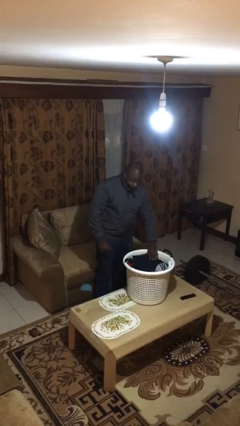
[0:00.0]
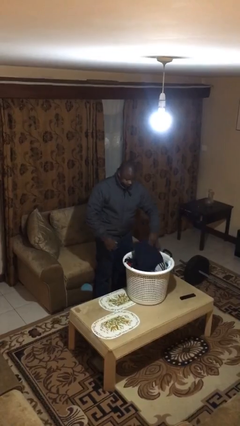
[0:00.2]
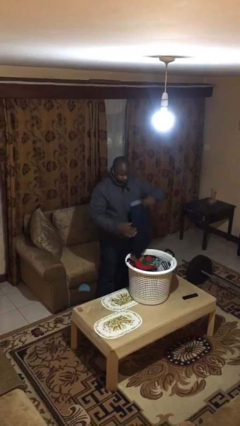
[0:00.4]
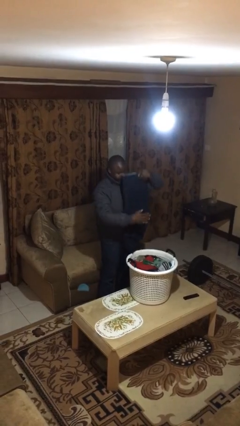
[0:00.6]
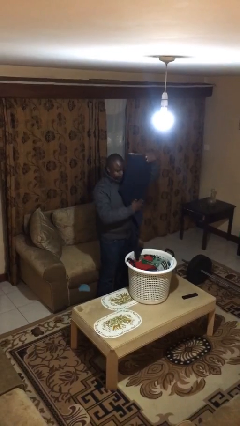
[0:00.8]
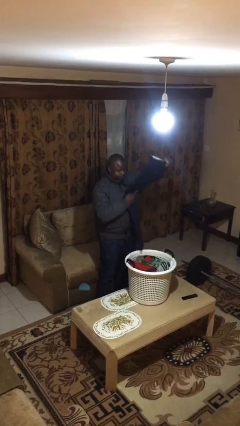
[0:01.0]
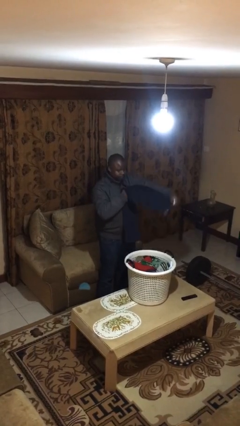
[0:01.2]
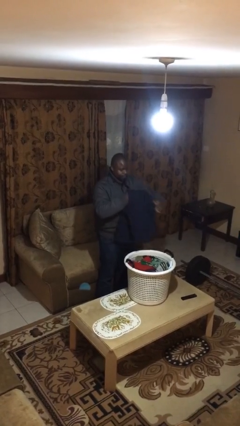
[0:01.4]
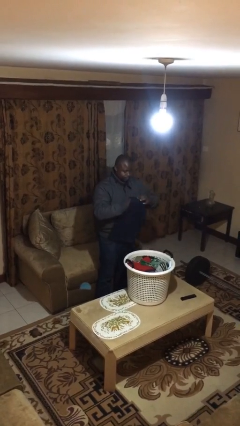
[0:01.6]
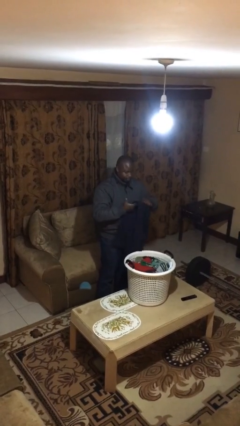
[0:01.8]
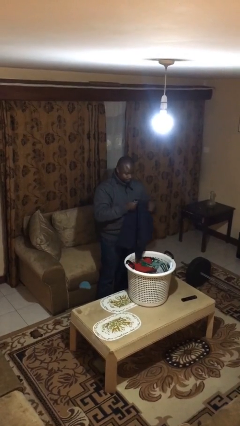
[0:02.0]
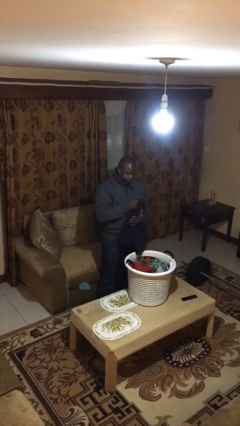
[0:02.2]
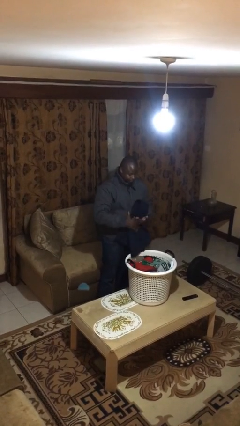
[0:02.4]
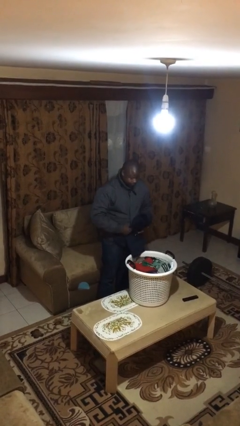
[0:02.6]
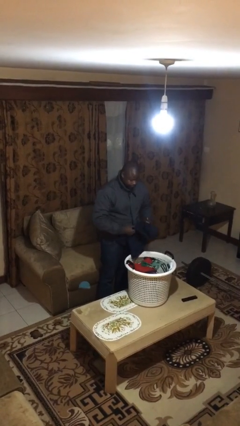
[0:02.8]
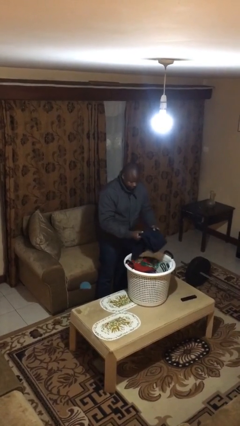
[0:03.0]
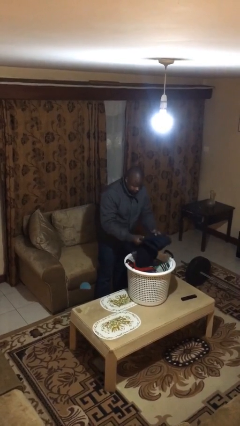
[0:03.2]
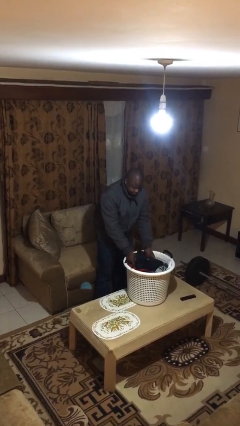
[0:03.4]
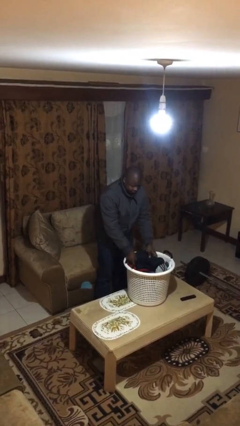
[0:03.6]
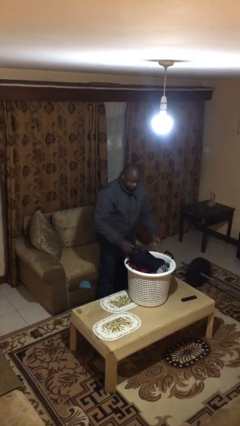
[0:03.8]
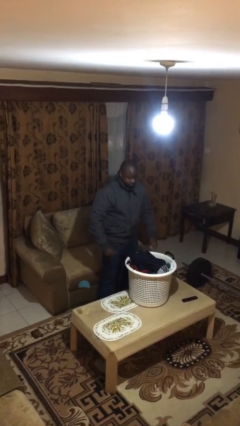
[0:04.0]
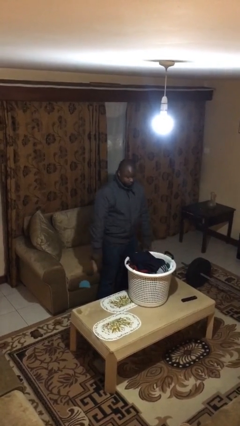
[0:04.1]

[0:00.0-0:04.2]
person folds pants

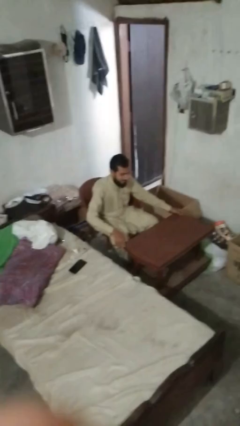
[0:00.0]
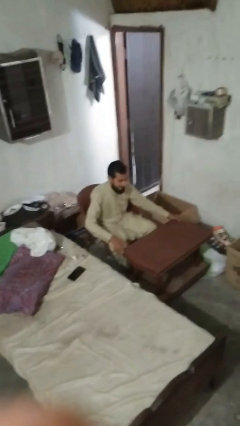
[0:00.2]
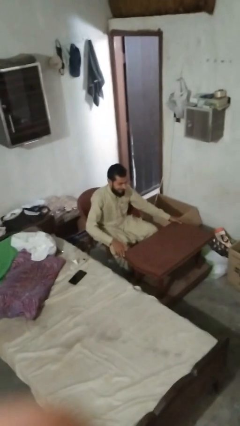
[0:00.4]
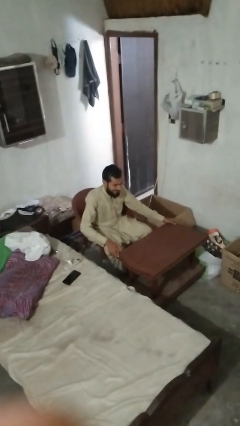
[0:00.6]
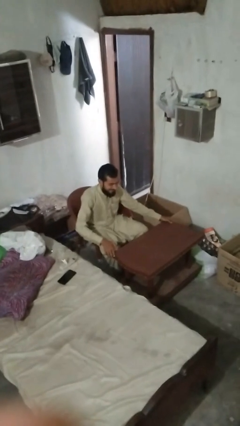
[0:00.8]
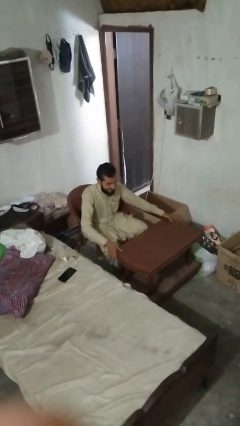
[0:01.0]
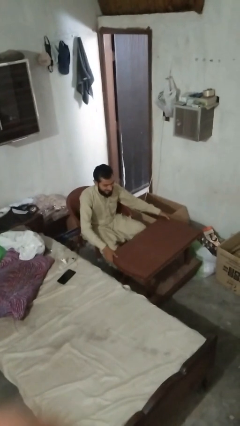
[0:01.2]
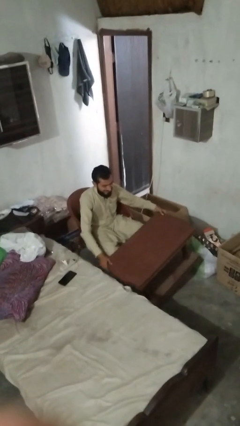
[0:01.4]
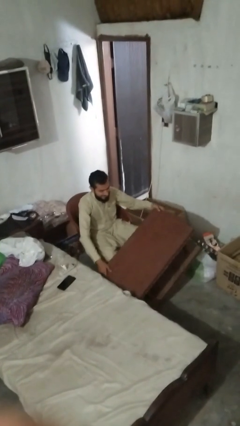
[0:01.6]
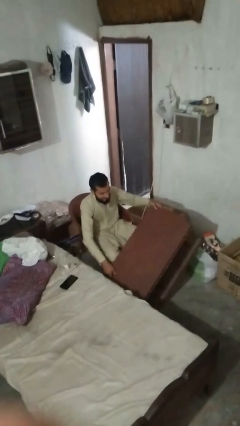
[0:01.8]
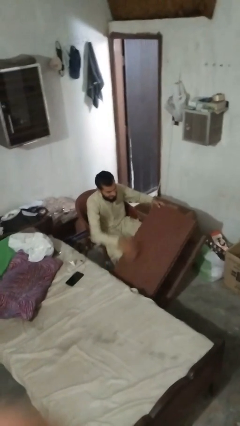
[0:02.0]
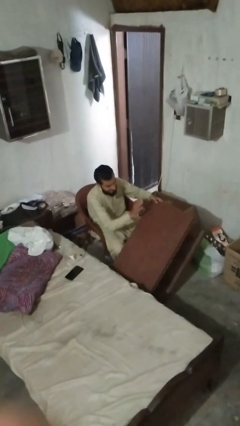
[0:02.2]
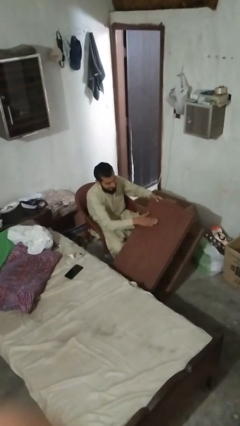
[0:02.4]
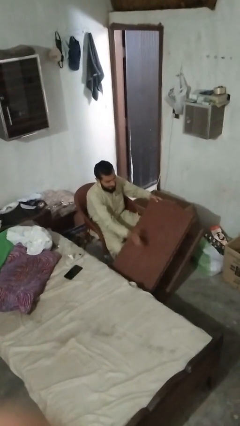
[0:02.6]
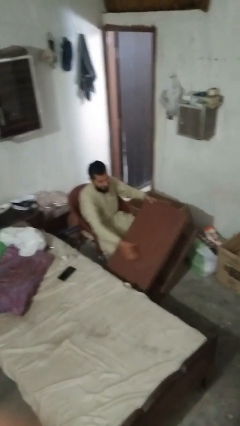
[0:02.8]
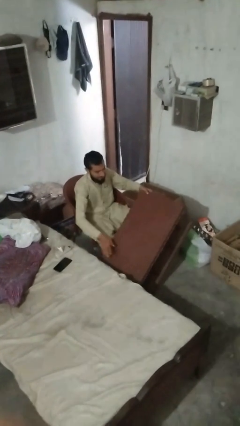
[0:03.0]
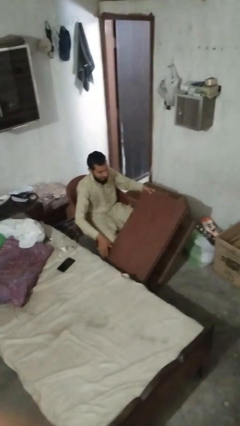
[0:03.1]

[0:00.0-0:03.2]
person knocks over furniture

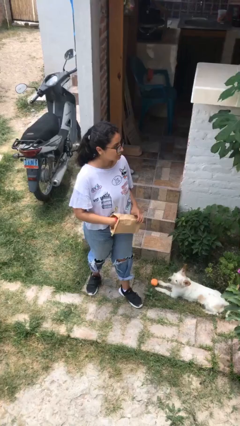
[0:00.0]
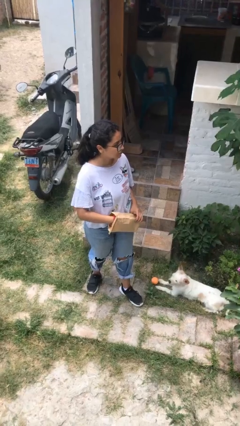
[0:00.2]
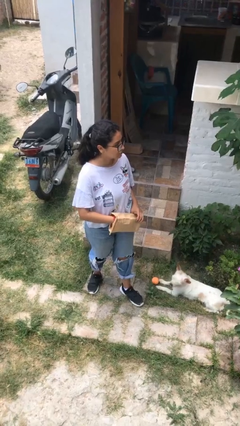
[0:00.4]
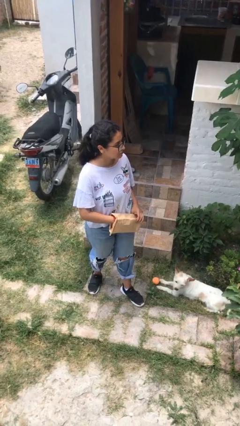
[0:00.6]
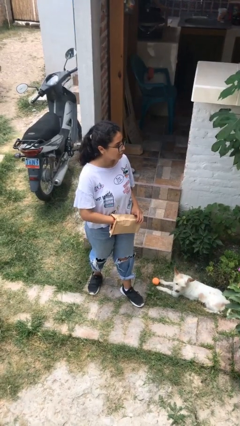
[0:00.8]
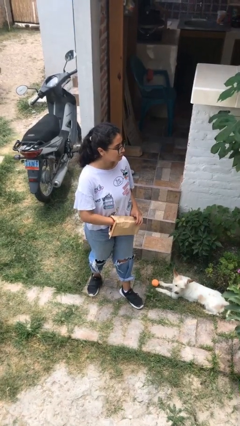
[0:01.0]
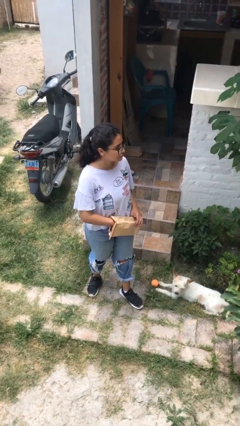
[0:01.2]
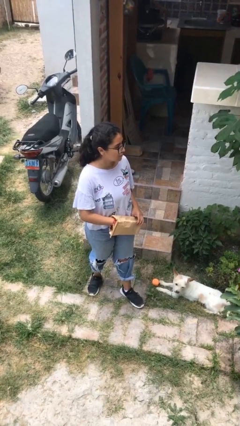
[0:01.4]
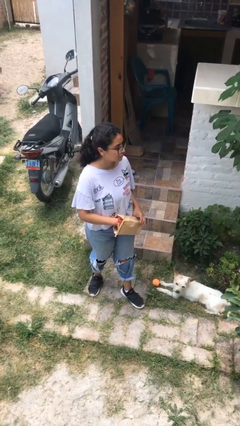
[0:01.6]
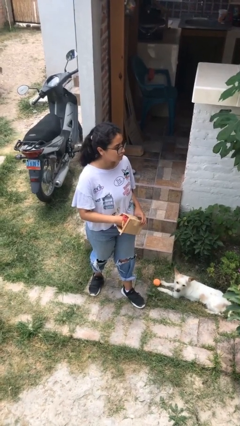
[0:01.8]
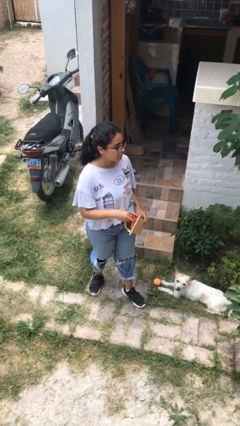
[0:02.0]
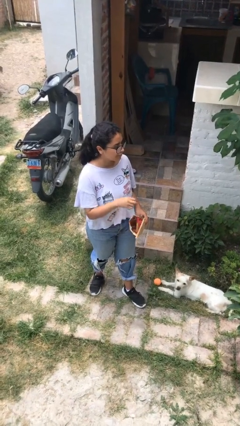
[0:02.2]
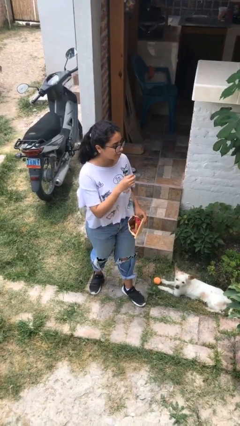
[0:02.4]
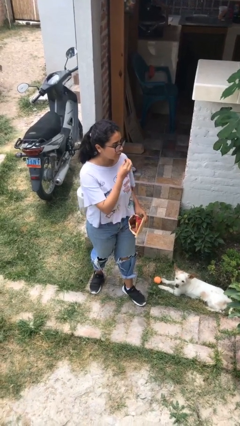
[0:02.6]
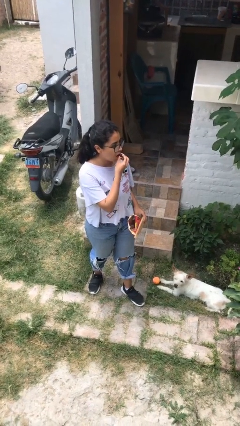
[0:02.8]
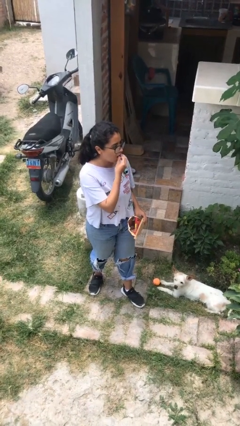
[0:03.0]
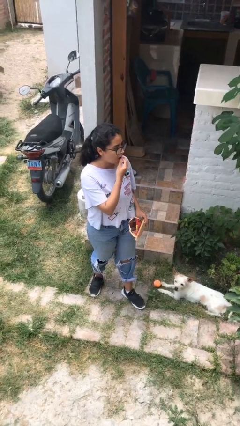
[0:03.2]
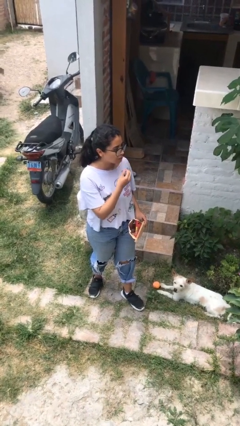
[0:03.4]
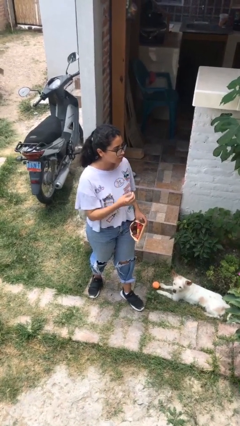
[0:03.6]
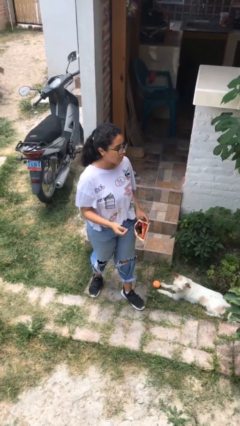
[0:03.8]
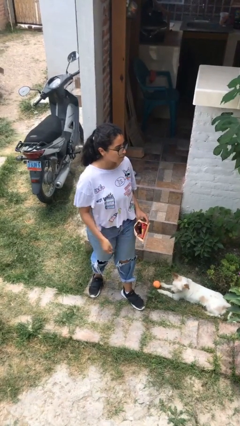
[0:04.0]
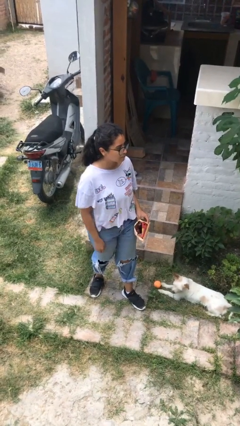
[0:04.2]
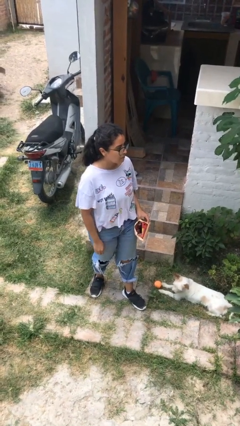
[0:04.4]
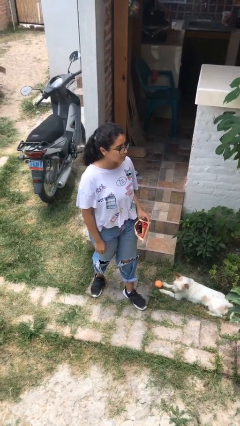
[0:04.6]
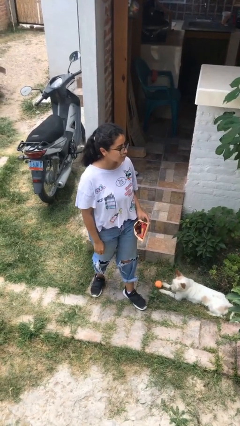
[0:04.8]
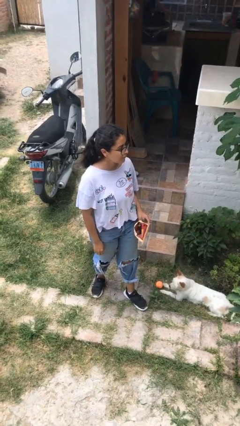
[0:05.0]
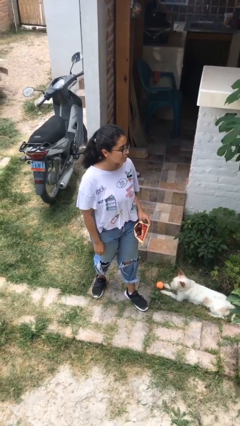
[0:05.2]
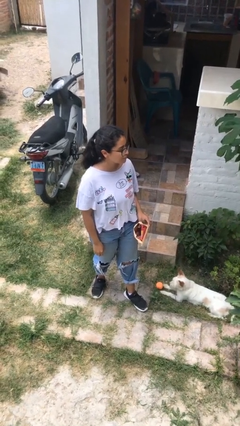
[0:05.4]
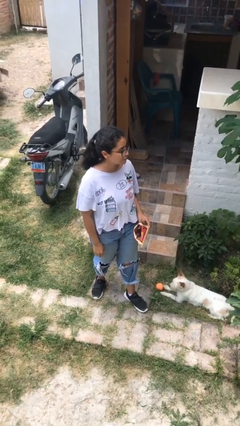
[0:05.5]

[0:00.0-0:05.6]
person eats snack from bag

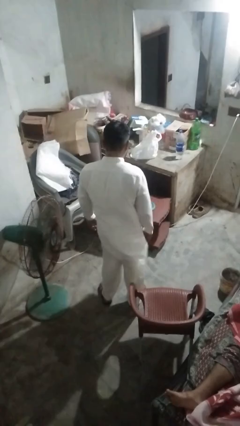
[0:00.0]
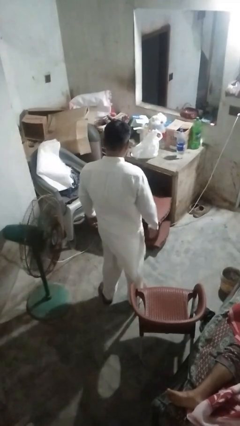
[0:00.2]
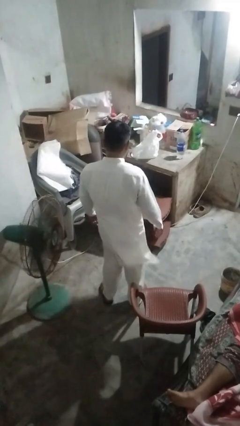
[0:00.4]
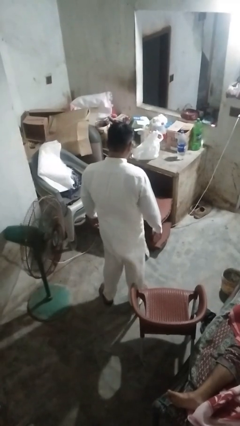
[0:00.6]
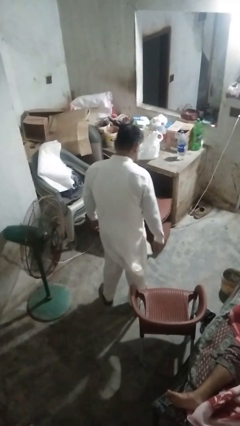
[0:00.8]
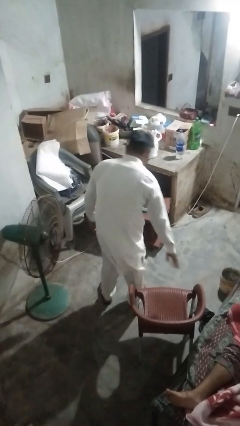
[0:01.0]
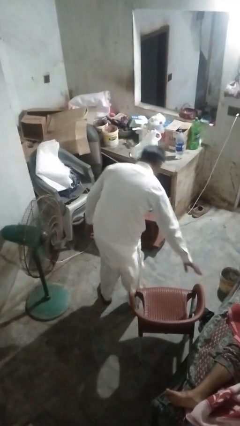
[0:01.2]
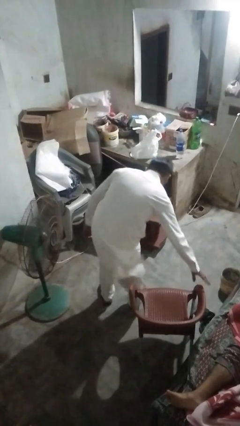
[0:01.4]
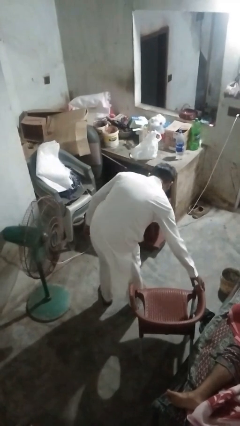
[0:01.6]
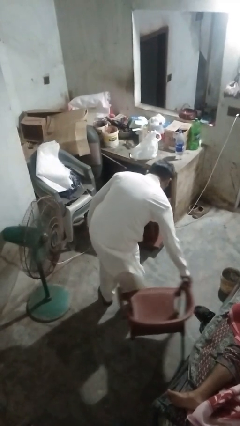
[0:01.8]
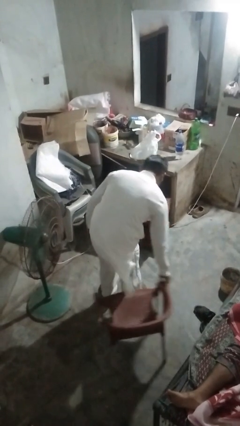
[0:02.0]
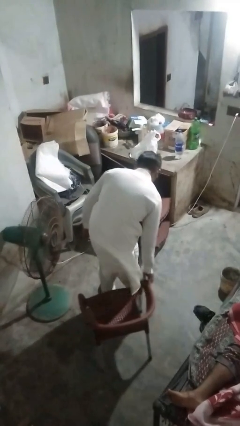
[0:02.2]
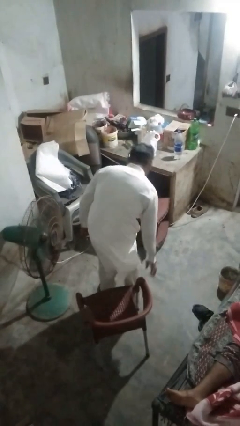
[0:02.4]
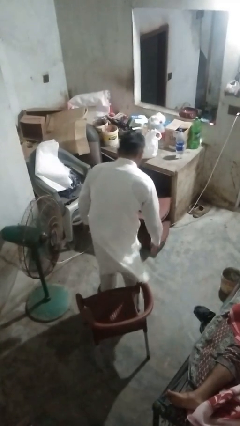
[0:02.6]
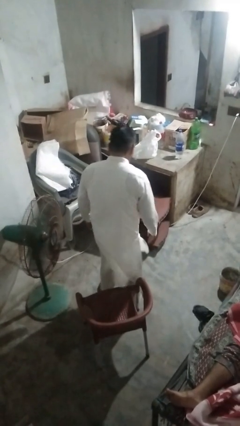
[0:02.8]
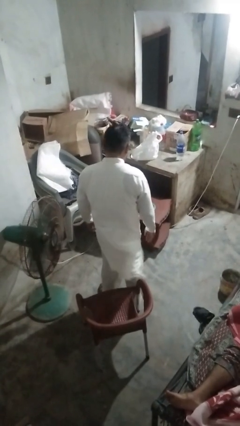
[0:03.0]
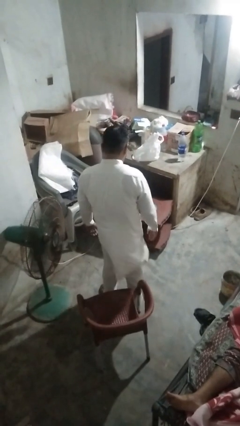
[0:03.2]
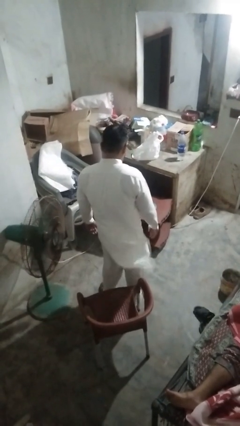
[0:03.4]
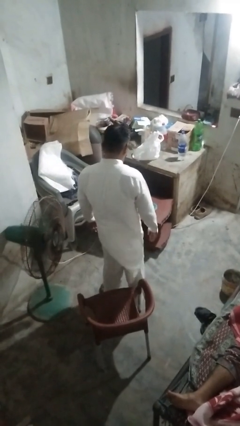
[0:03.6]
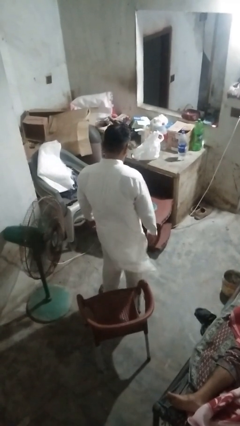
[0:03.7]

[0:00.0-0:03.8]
person pulls out chair

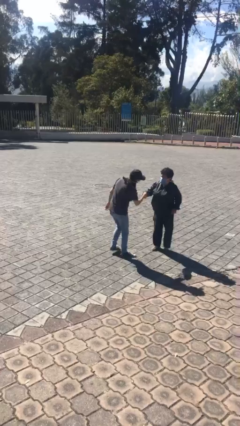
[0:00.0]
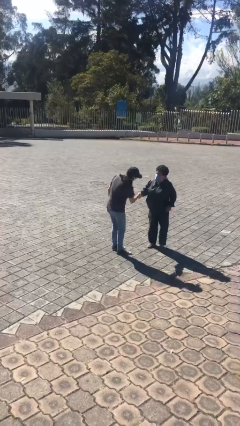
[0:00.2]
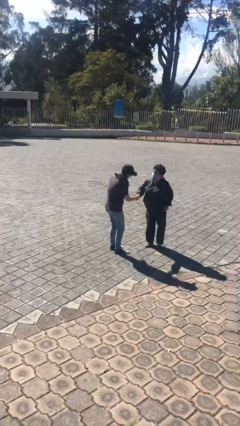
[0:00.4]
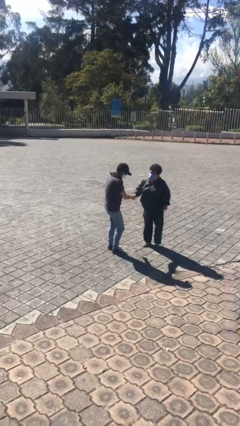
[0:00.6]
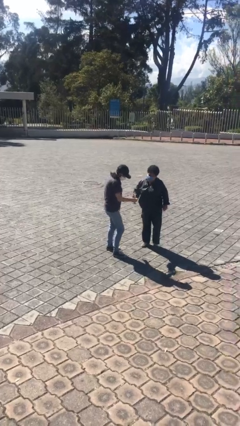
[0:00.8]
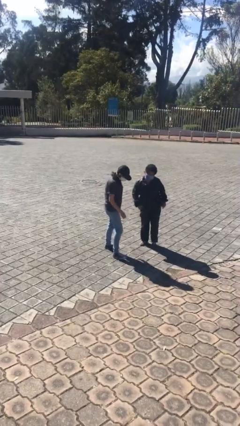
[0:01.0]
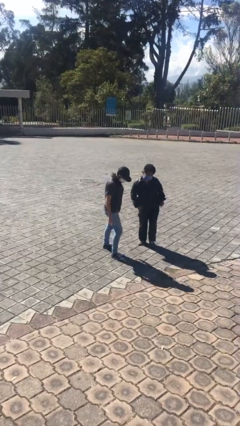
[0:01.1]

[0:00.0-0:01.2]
person shakes hand
